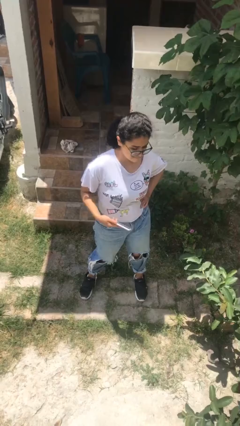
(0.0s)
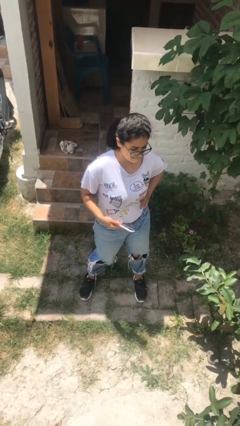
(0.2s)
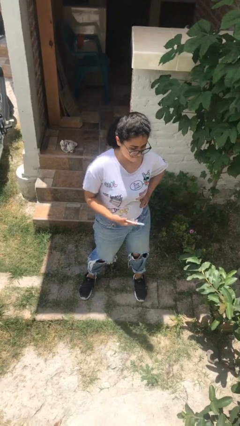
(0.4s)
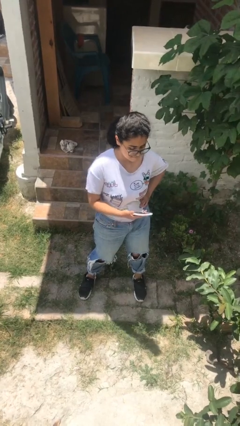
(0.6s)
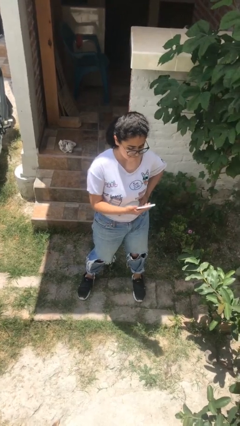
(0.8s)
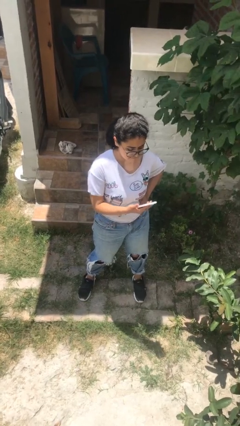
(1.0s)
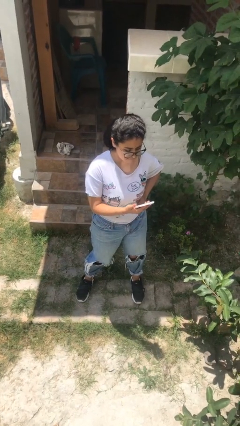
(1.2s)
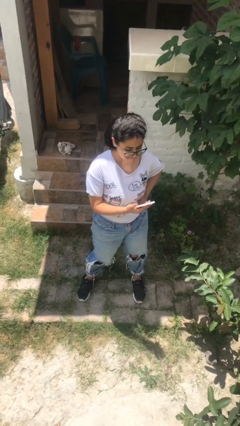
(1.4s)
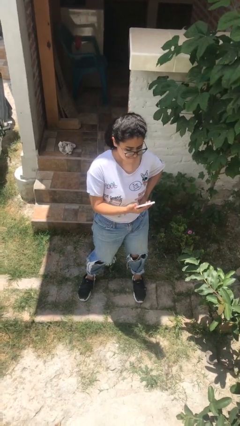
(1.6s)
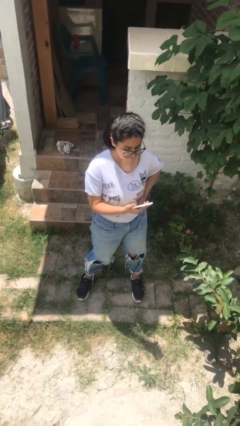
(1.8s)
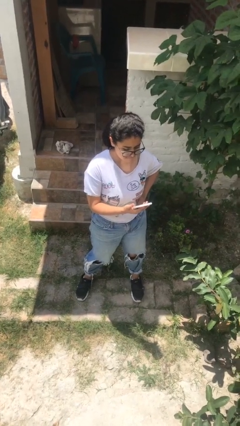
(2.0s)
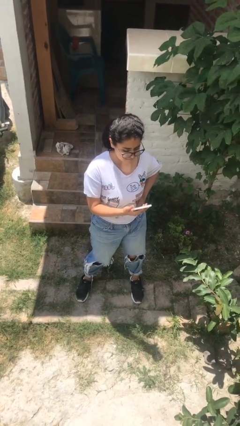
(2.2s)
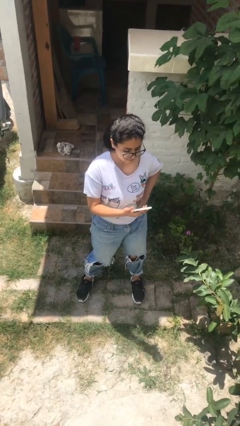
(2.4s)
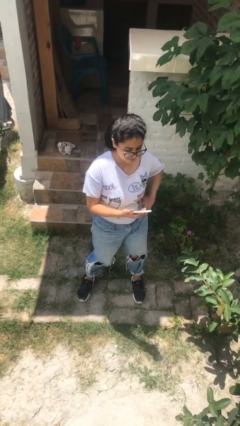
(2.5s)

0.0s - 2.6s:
person puts phone into pocket

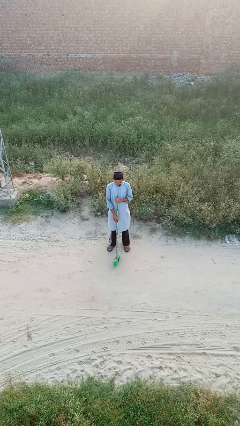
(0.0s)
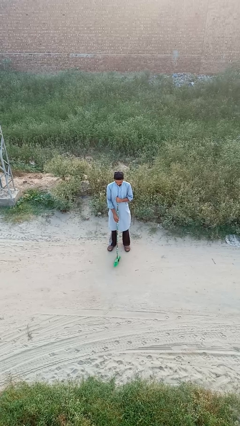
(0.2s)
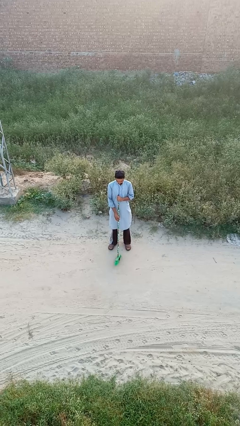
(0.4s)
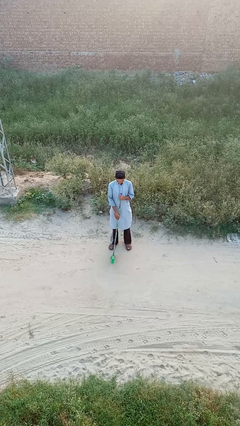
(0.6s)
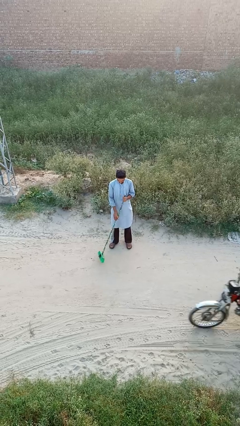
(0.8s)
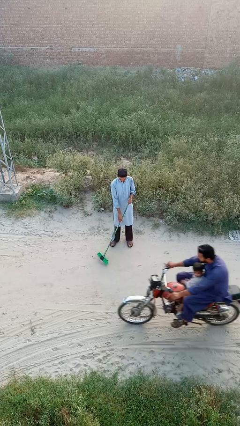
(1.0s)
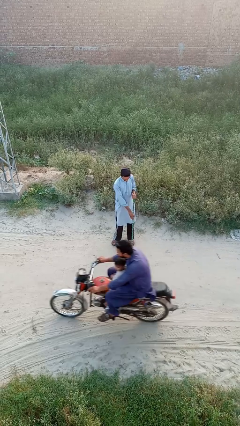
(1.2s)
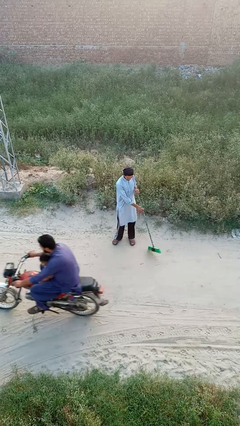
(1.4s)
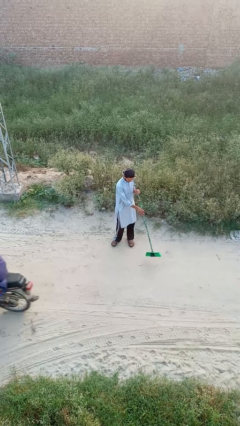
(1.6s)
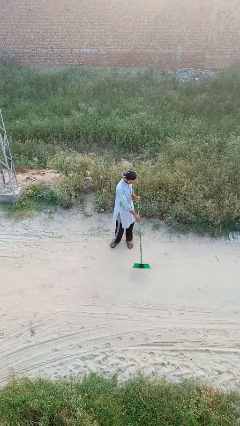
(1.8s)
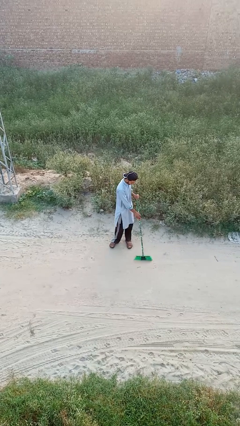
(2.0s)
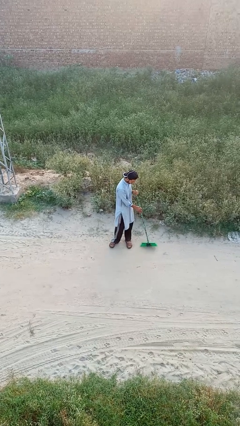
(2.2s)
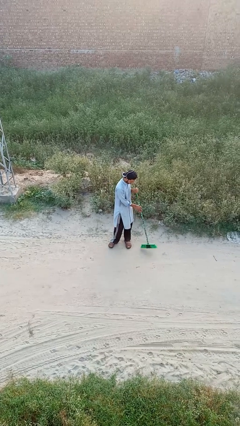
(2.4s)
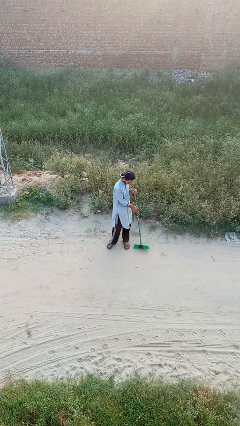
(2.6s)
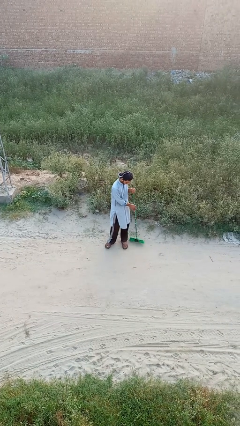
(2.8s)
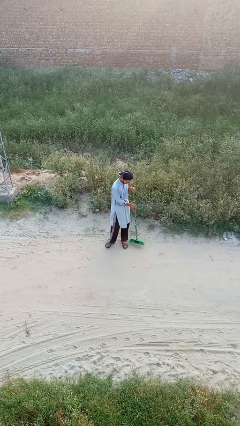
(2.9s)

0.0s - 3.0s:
person sweeps floor

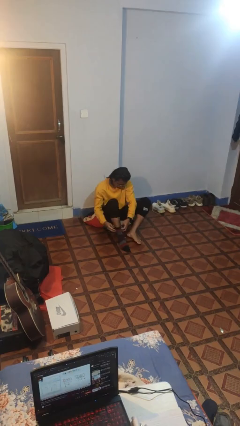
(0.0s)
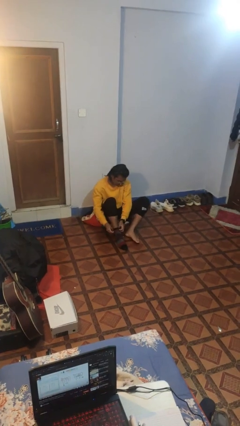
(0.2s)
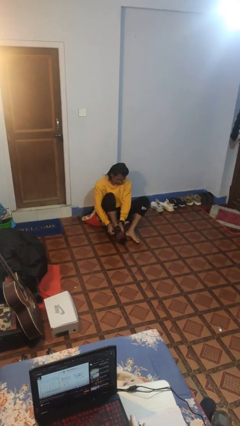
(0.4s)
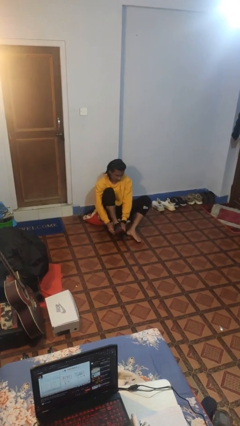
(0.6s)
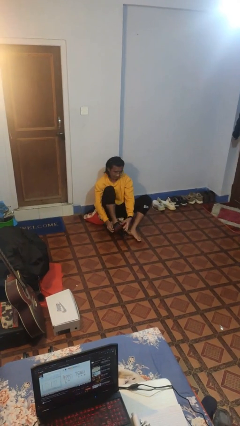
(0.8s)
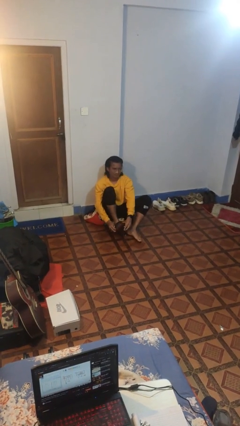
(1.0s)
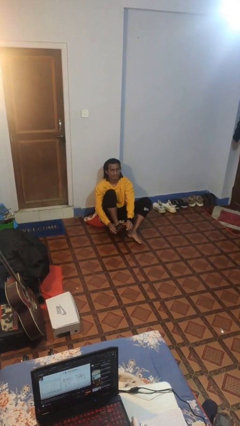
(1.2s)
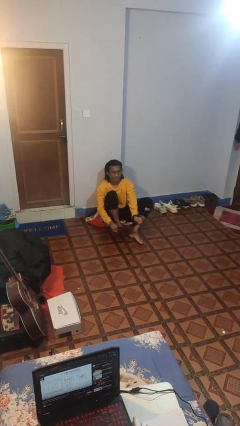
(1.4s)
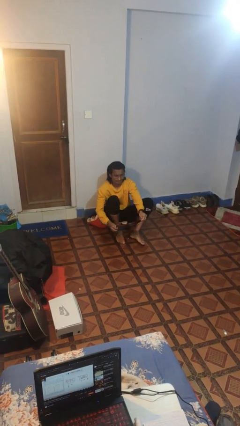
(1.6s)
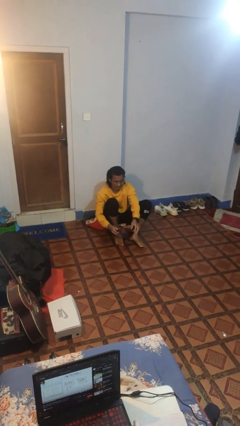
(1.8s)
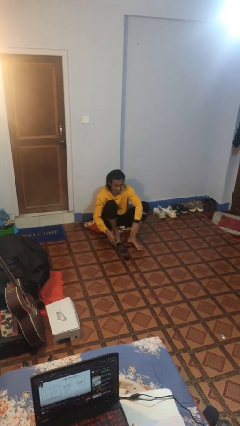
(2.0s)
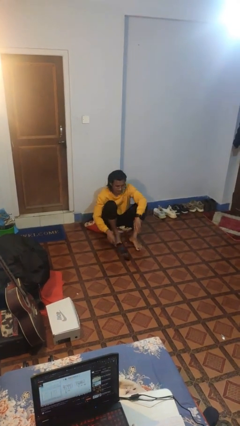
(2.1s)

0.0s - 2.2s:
person takes off socks

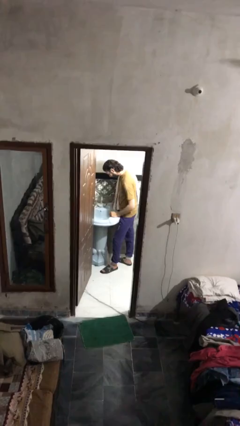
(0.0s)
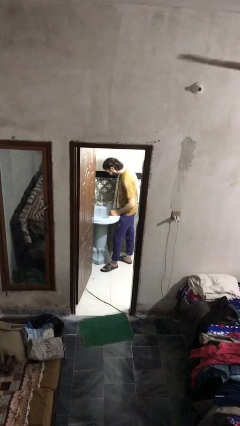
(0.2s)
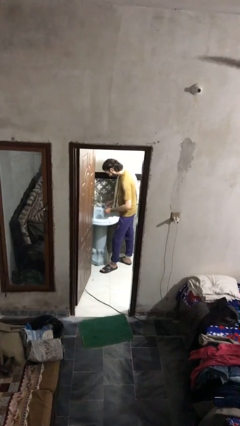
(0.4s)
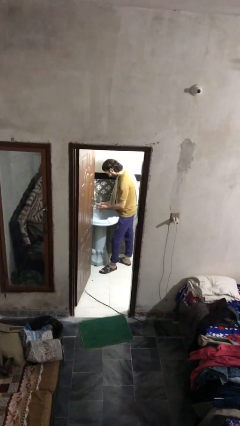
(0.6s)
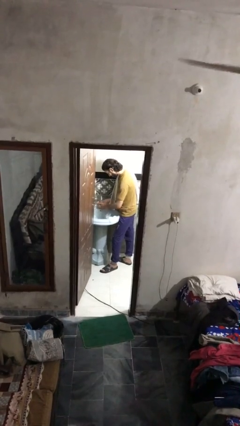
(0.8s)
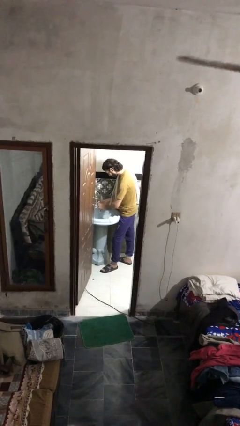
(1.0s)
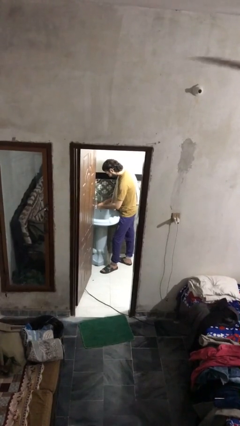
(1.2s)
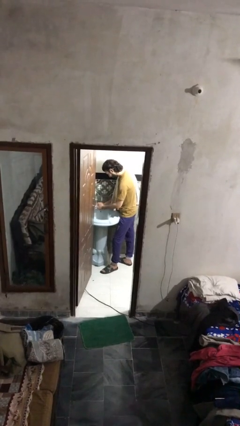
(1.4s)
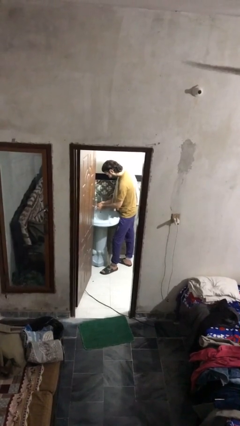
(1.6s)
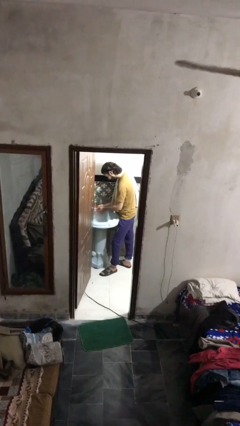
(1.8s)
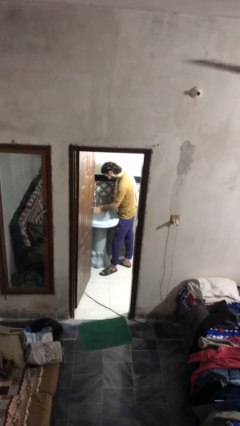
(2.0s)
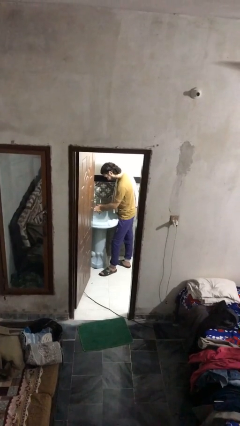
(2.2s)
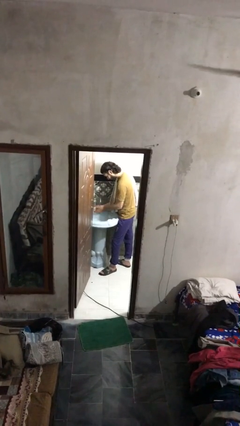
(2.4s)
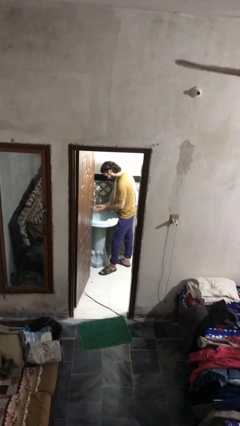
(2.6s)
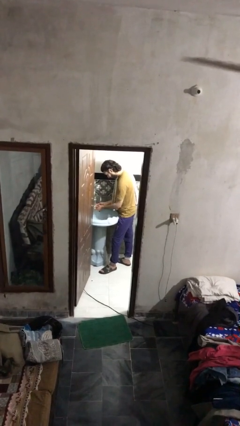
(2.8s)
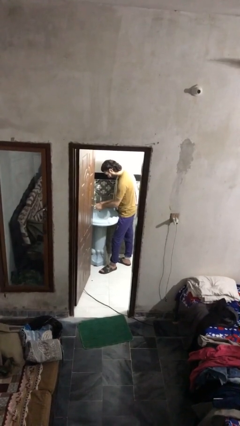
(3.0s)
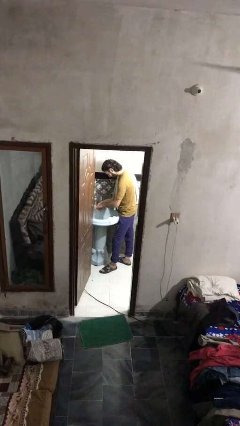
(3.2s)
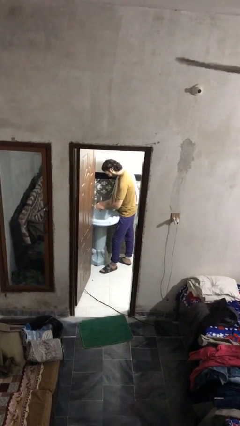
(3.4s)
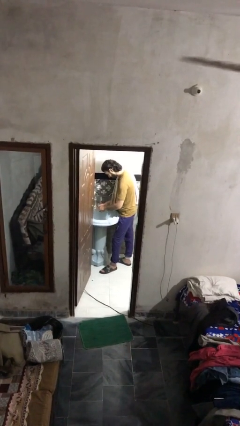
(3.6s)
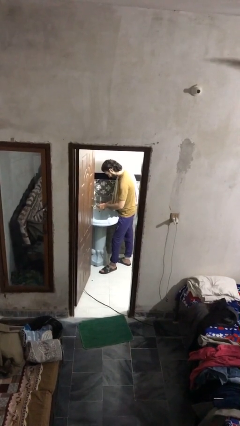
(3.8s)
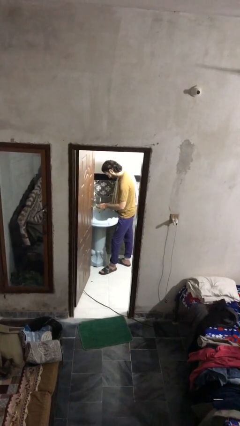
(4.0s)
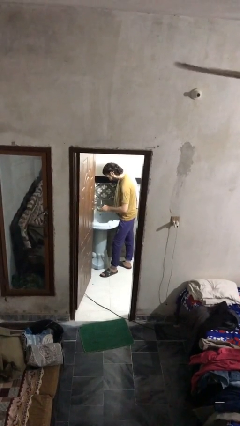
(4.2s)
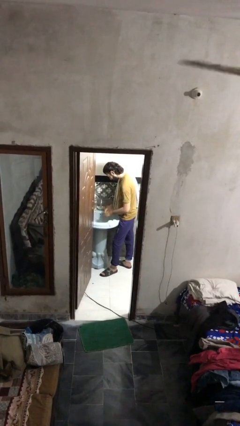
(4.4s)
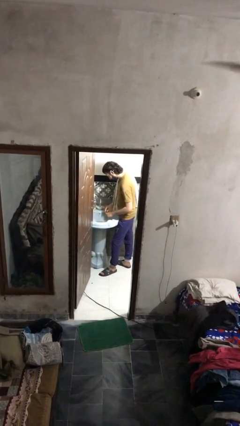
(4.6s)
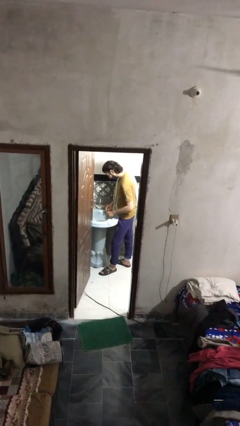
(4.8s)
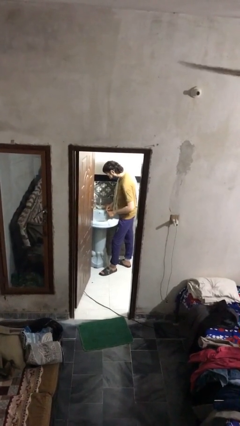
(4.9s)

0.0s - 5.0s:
person washes hands

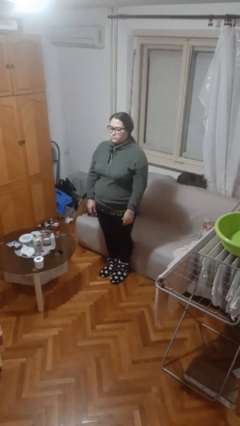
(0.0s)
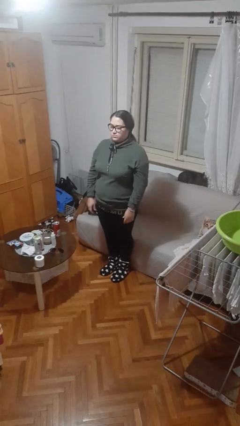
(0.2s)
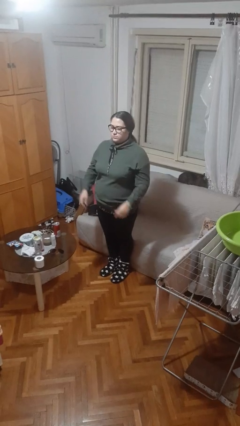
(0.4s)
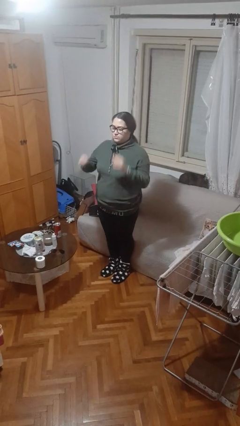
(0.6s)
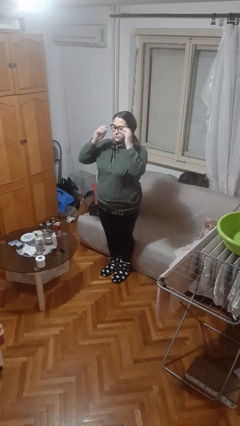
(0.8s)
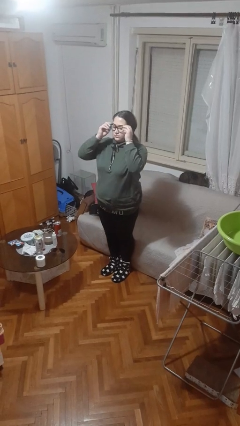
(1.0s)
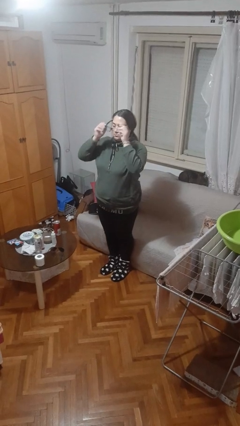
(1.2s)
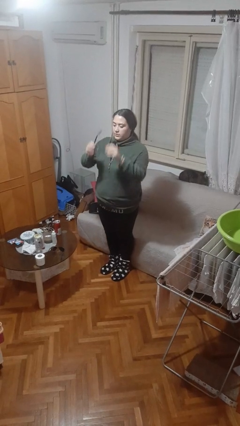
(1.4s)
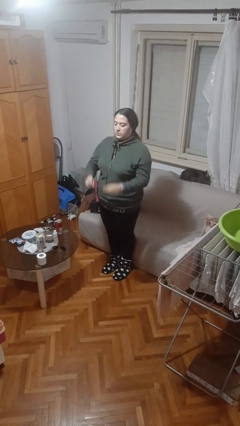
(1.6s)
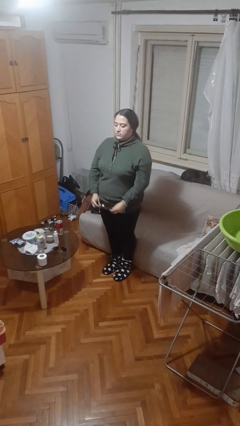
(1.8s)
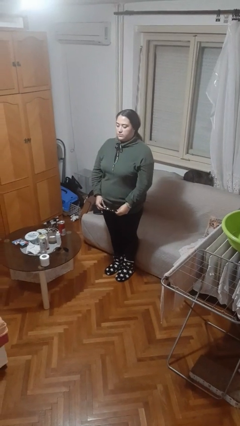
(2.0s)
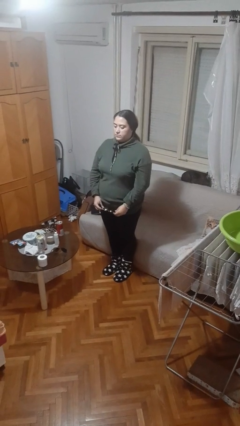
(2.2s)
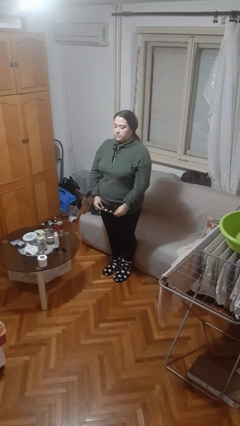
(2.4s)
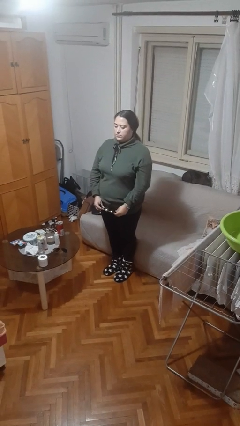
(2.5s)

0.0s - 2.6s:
person takes off glasses

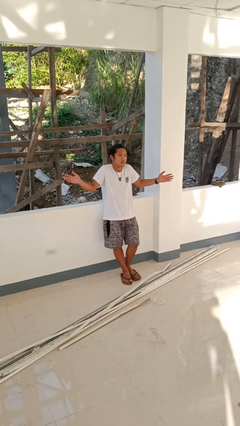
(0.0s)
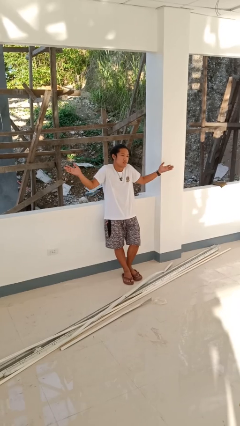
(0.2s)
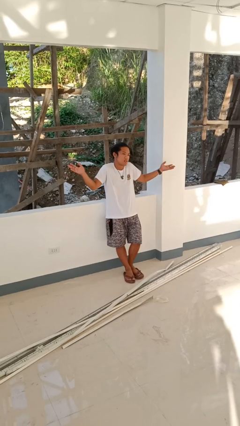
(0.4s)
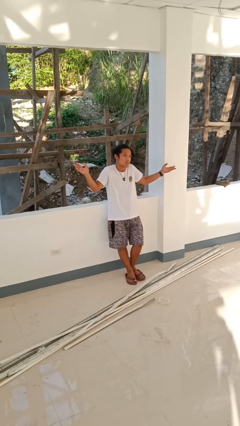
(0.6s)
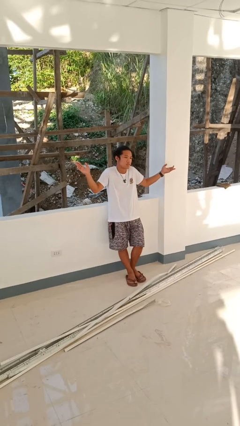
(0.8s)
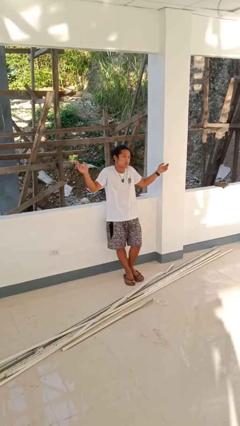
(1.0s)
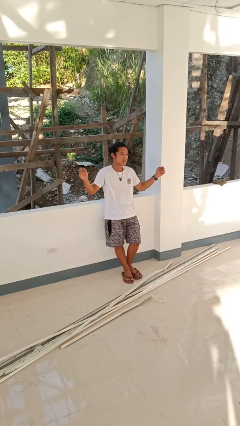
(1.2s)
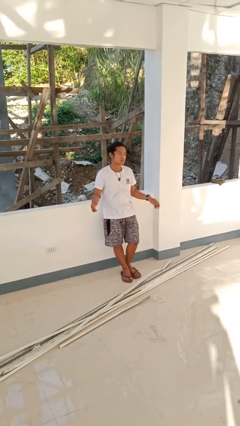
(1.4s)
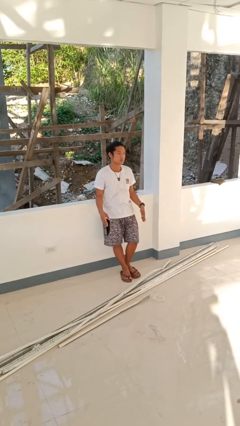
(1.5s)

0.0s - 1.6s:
person shrugs

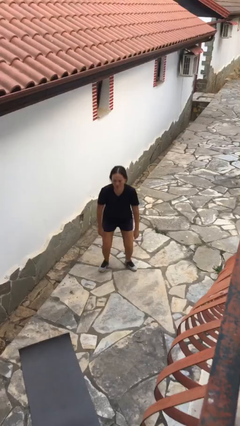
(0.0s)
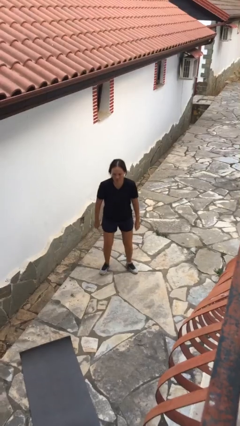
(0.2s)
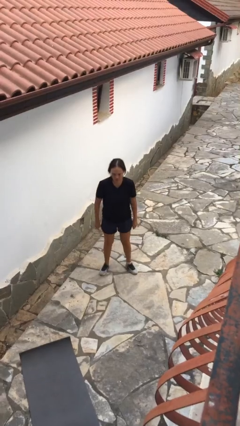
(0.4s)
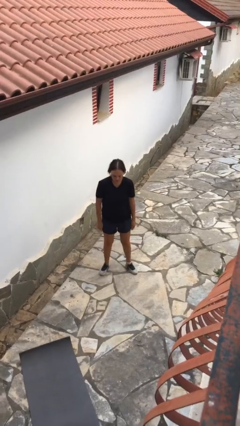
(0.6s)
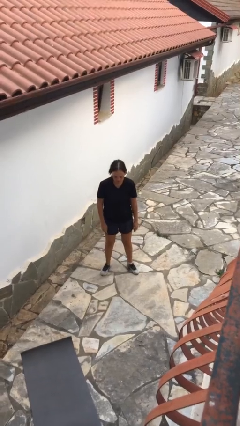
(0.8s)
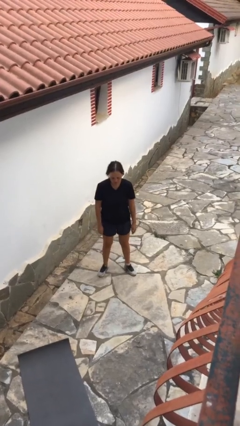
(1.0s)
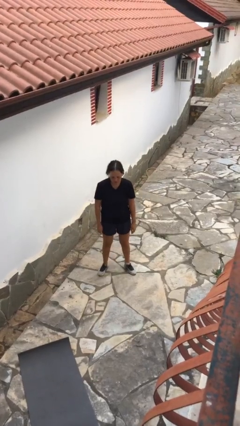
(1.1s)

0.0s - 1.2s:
person stands up
